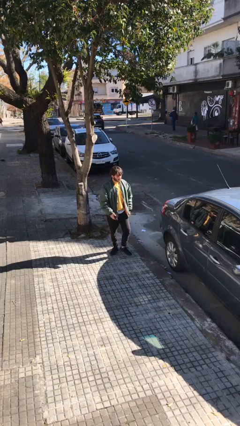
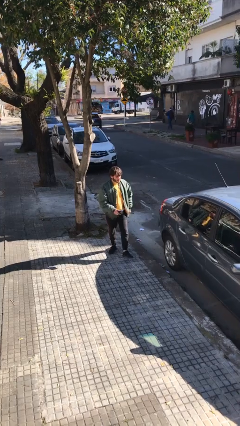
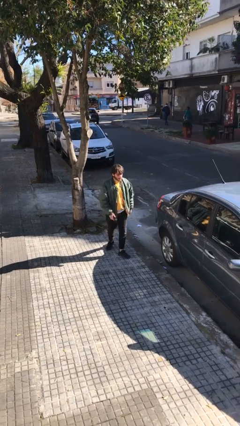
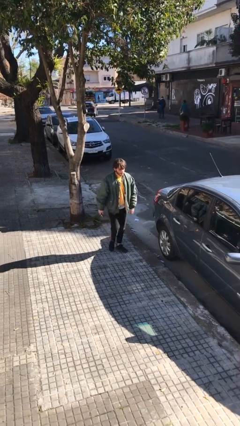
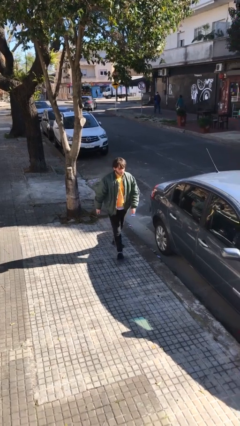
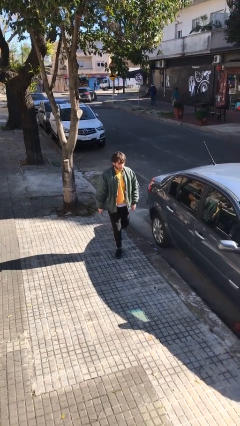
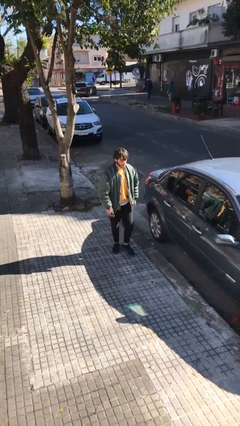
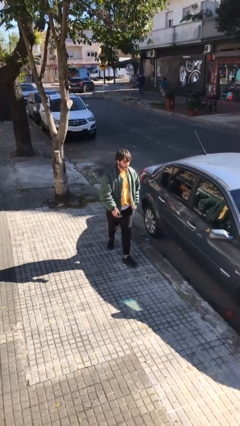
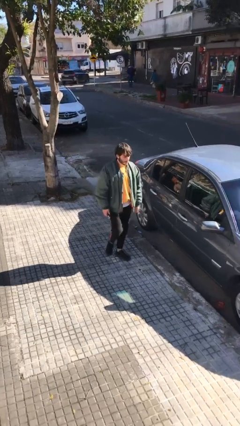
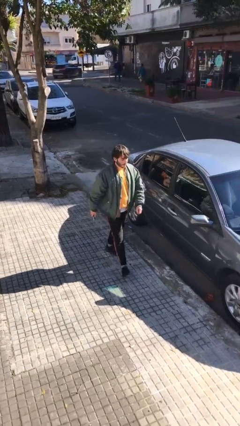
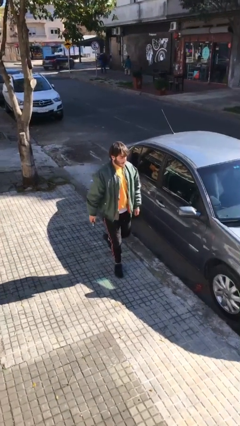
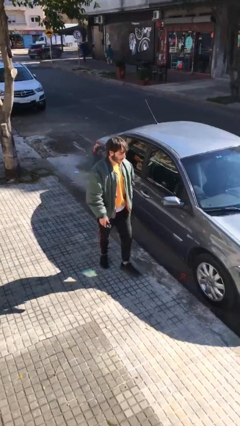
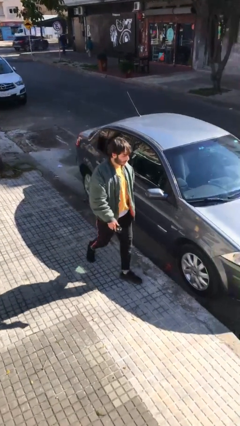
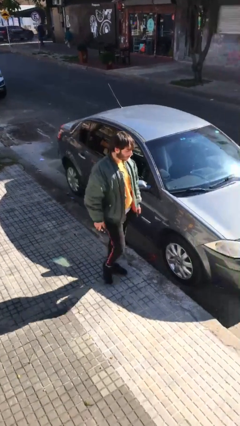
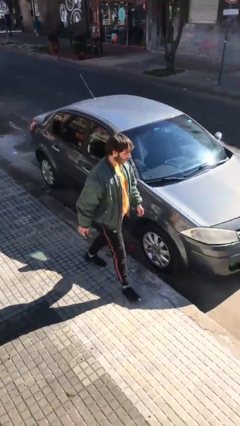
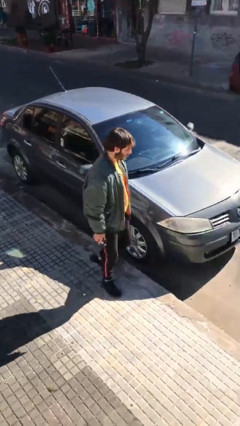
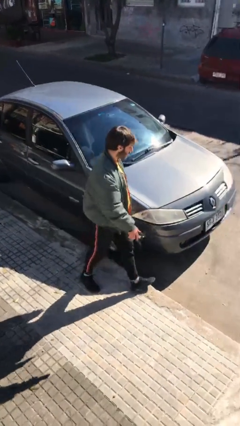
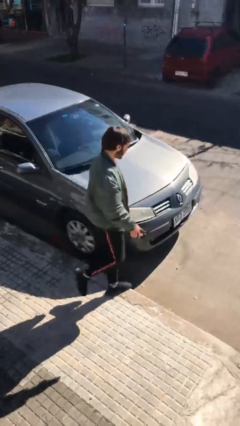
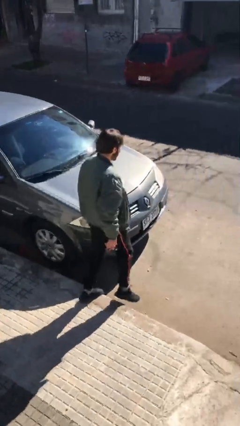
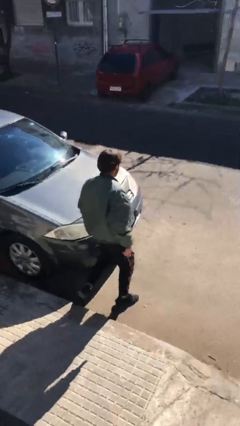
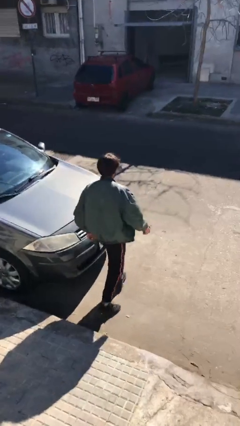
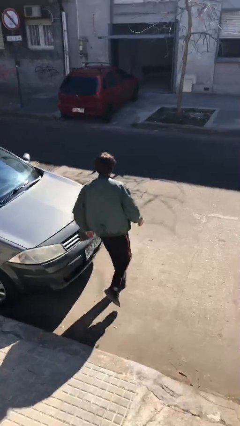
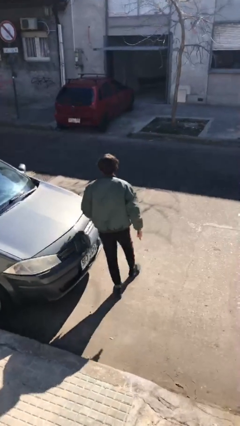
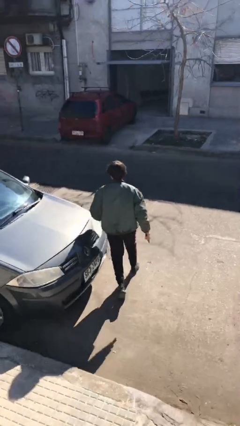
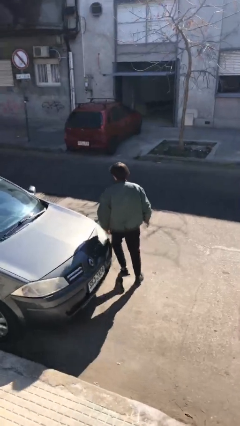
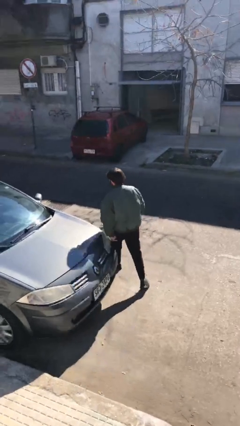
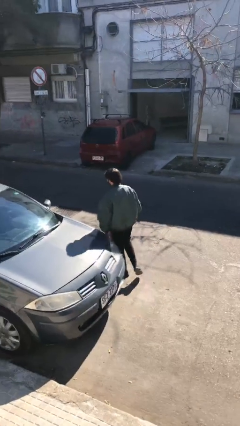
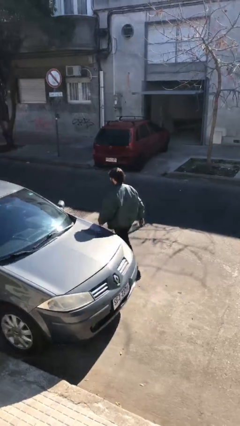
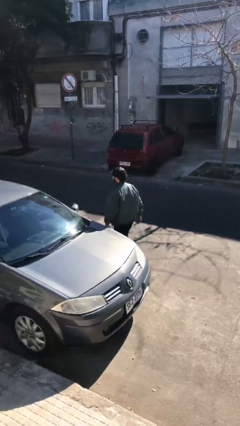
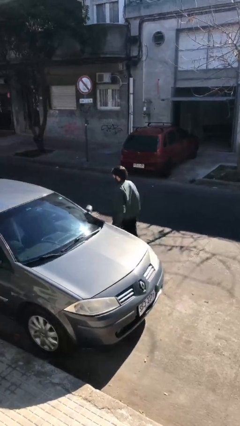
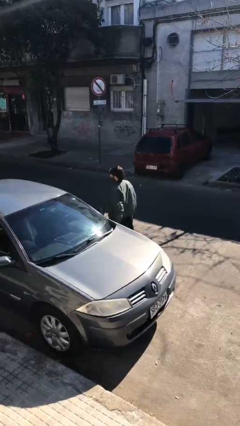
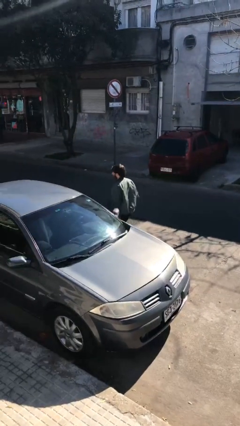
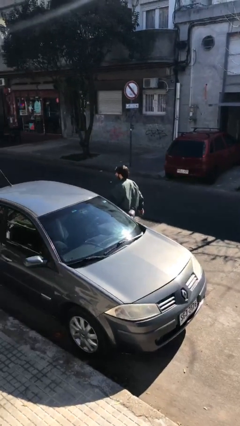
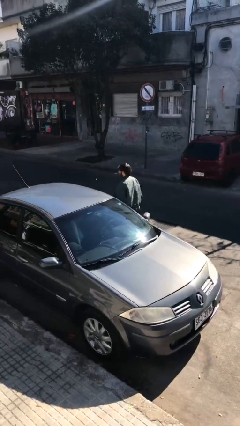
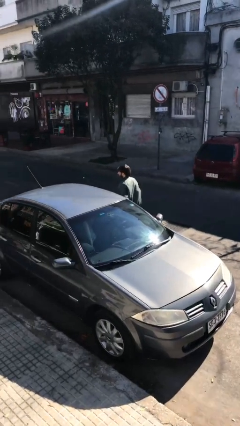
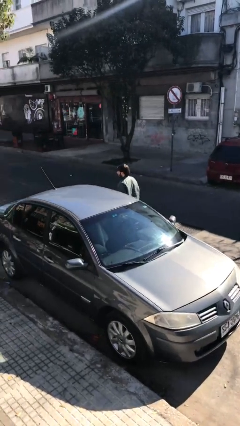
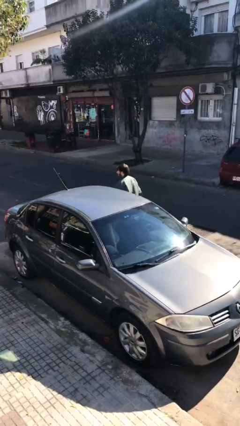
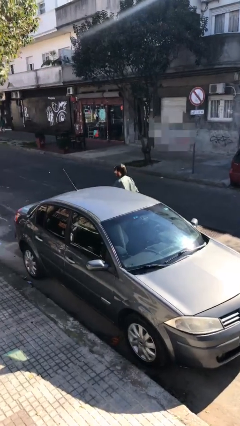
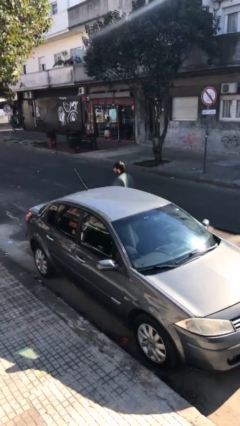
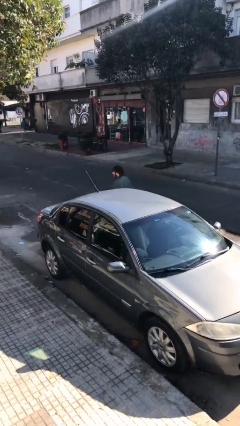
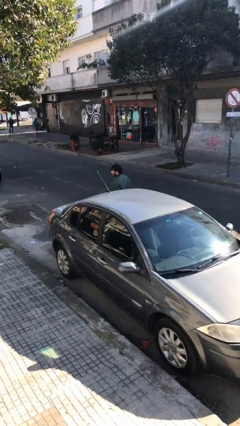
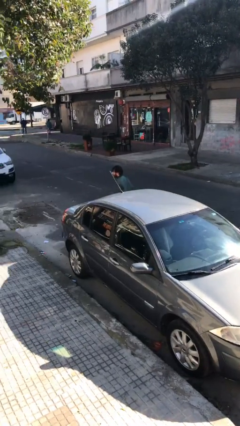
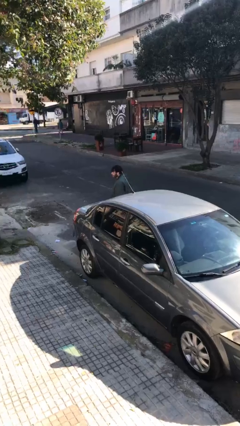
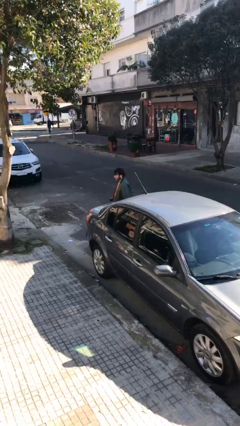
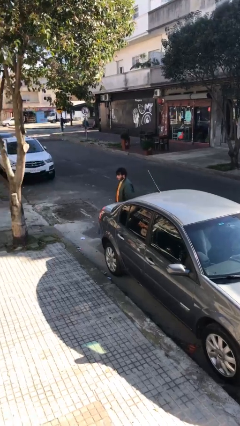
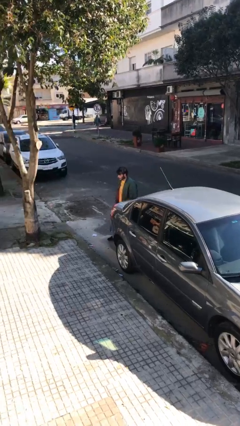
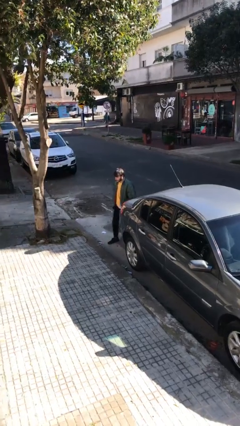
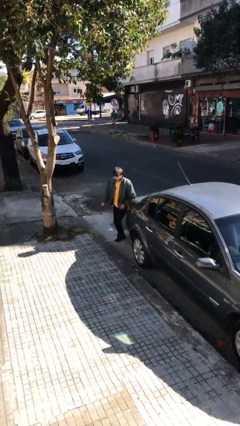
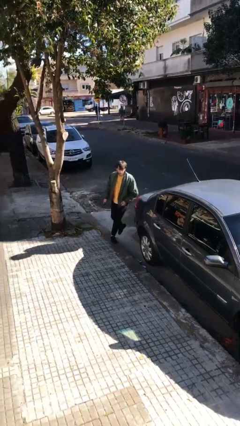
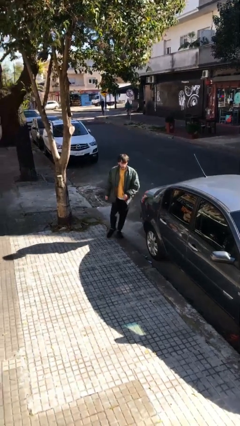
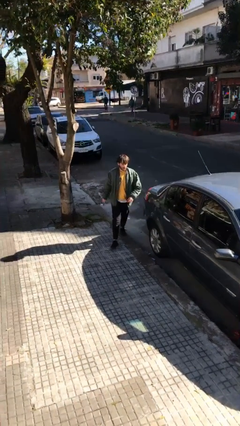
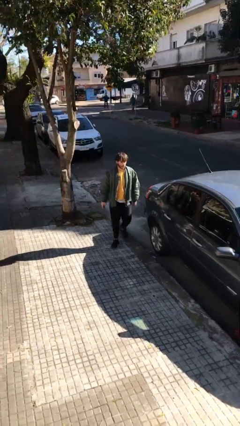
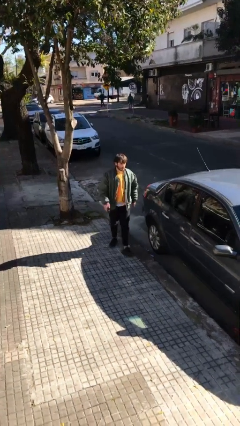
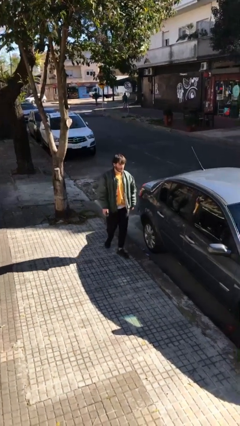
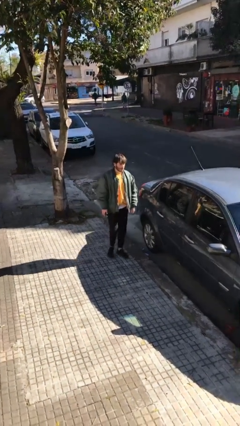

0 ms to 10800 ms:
person walks around car

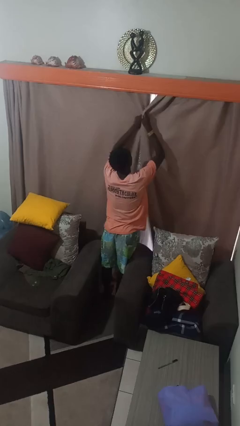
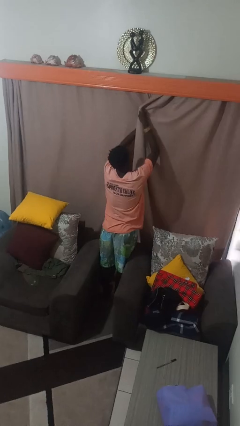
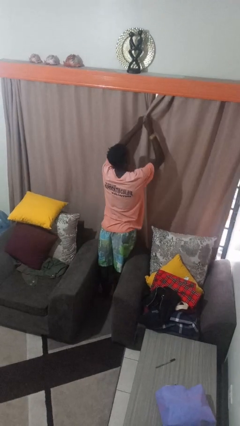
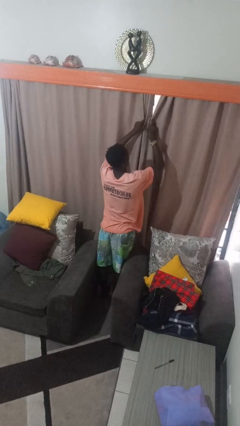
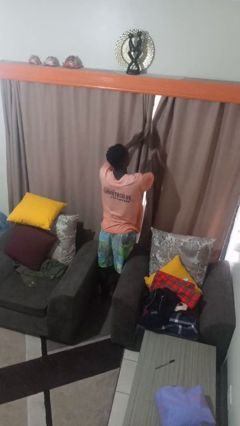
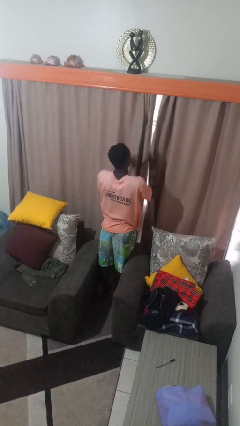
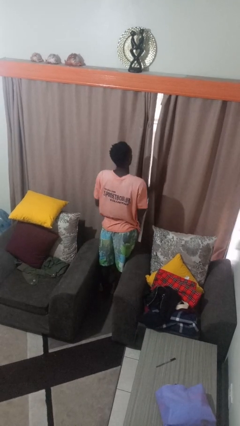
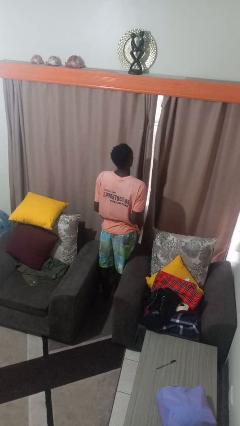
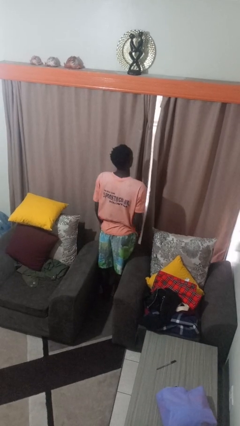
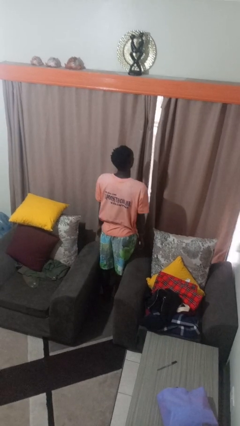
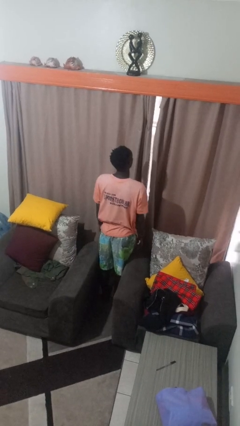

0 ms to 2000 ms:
person closes curtains

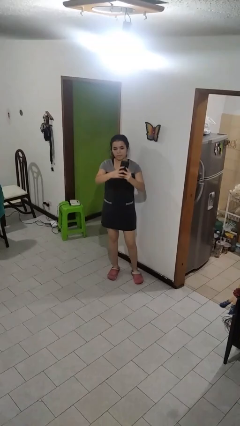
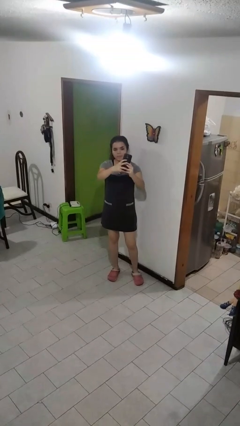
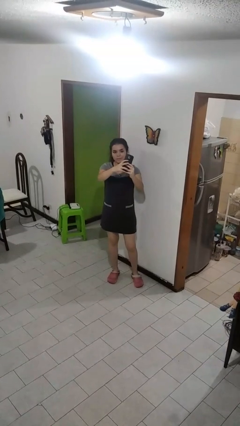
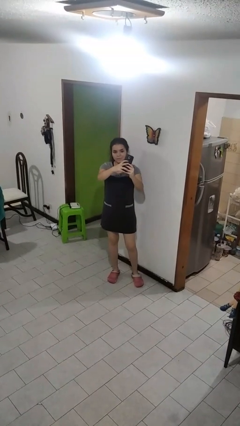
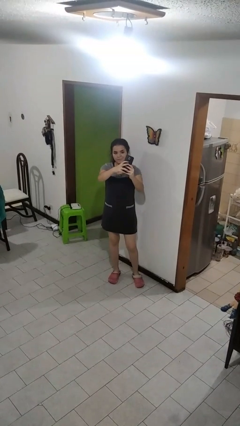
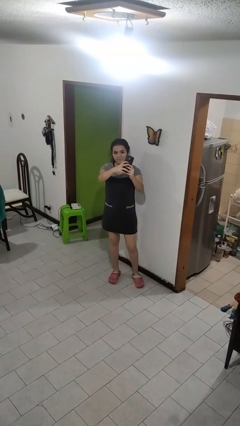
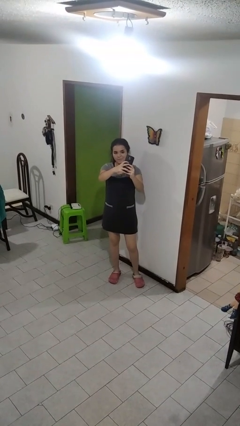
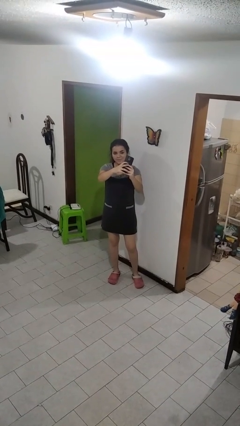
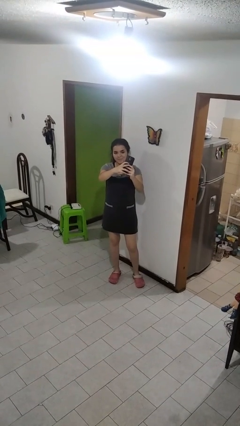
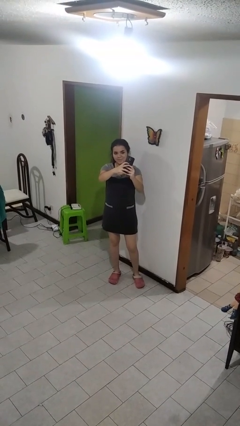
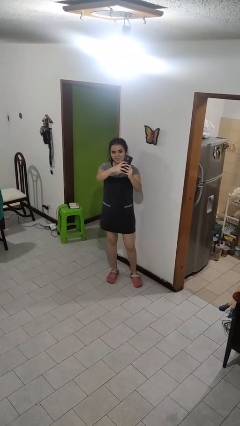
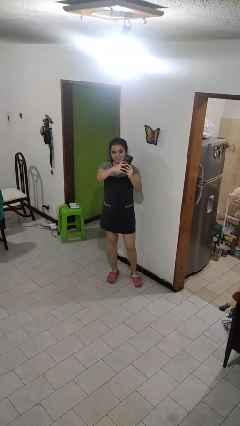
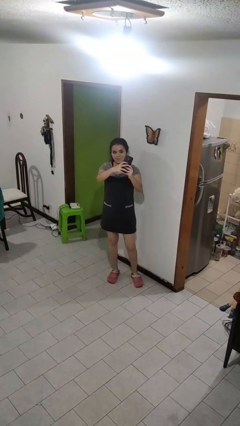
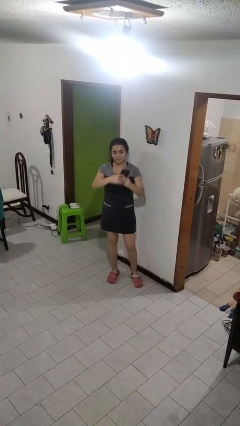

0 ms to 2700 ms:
person takes selfie

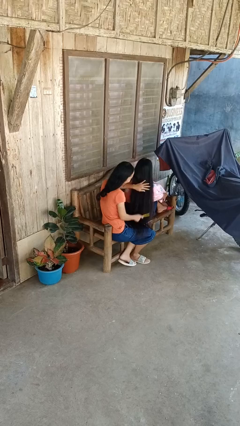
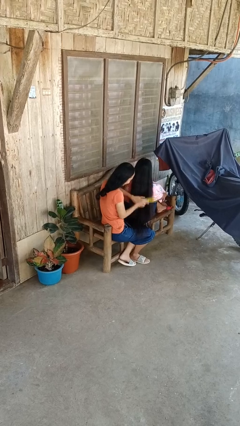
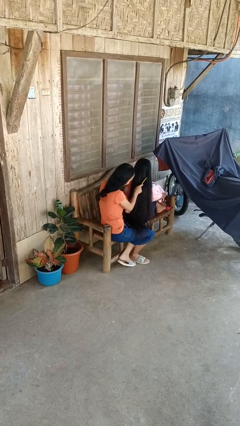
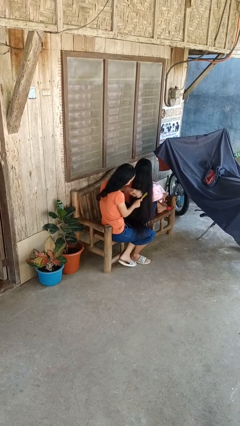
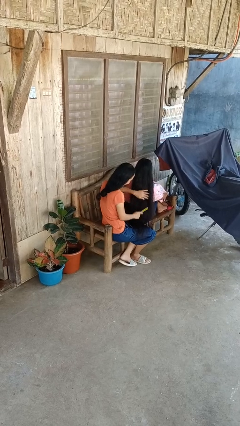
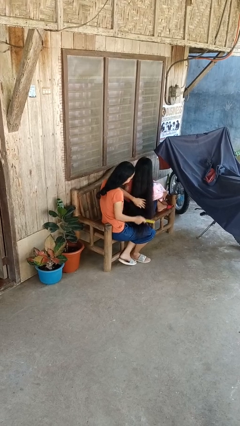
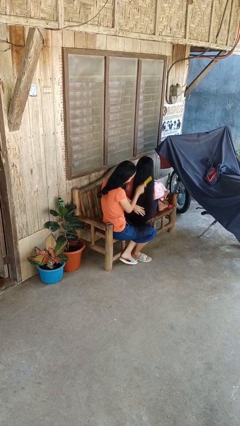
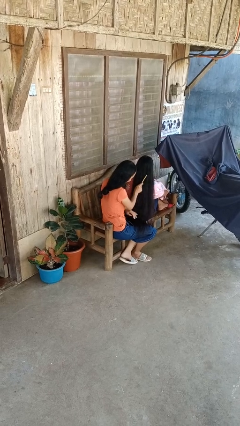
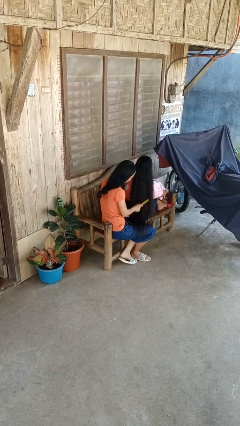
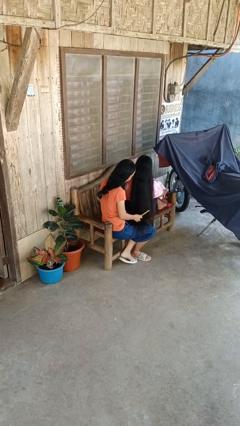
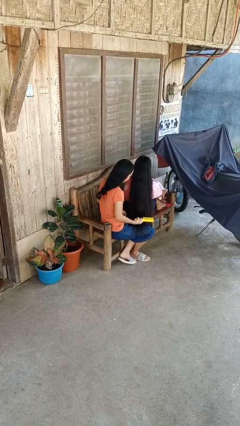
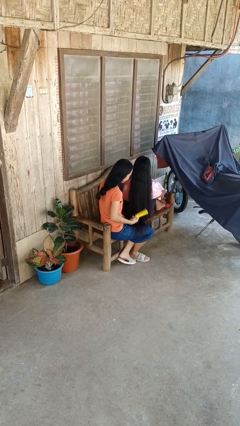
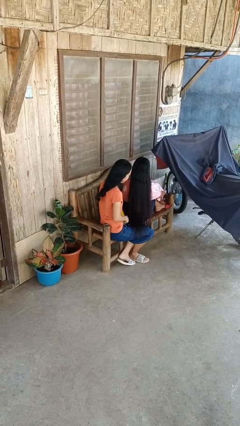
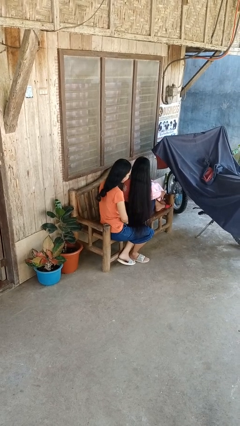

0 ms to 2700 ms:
person brushes hair of person
